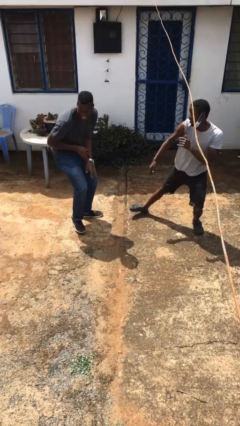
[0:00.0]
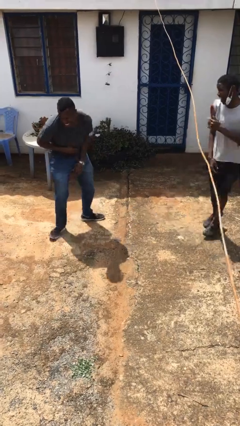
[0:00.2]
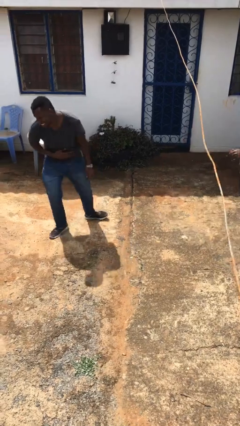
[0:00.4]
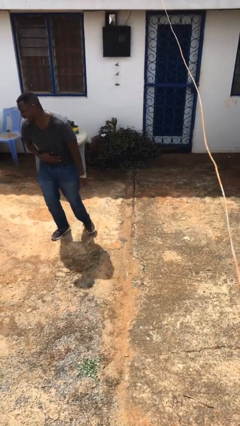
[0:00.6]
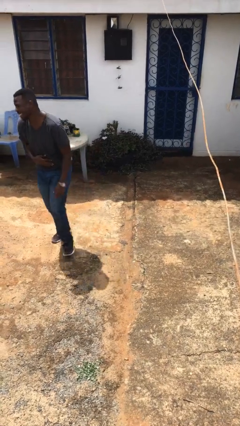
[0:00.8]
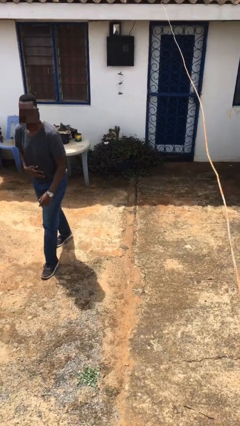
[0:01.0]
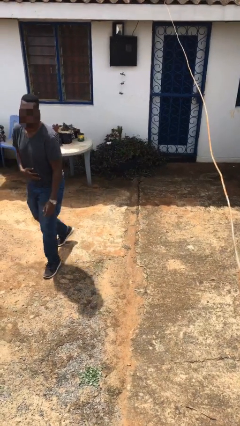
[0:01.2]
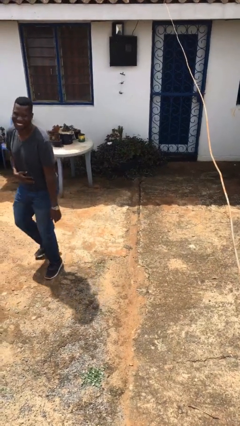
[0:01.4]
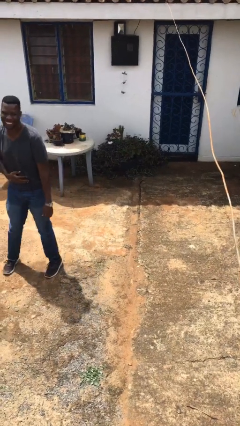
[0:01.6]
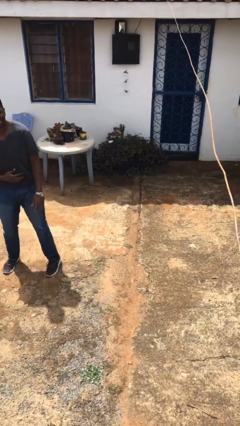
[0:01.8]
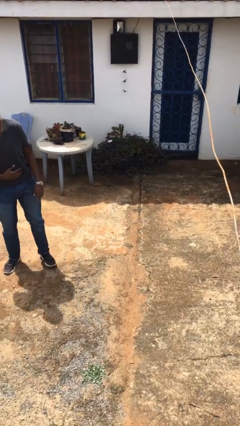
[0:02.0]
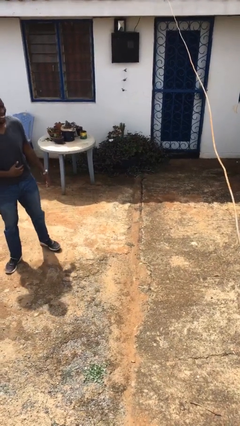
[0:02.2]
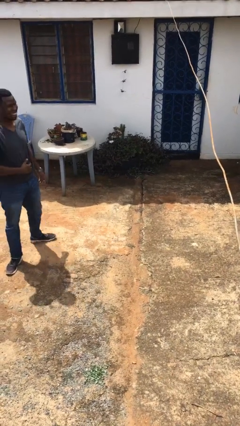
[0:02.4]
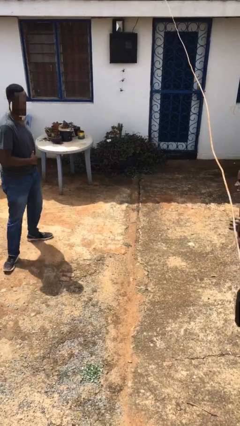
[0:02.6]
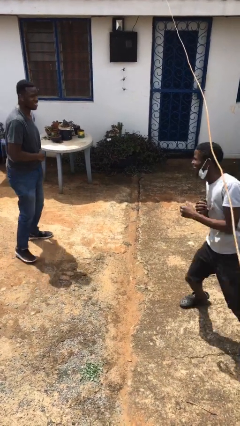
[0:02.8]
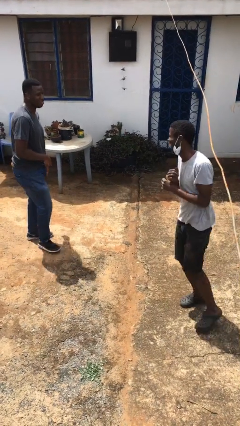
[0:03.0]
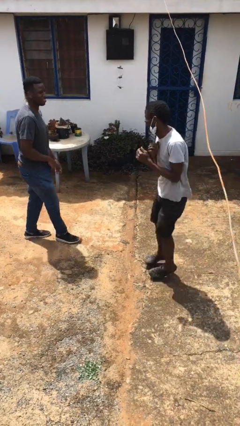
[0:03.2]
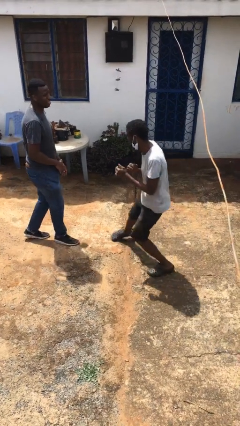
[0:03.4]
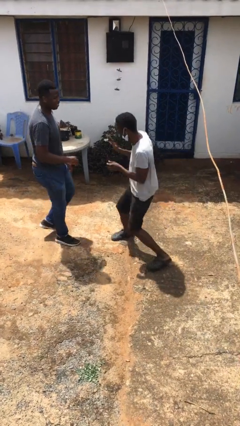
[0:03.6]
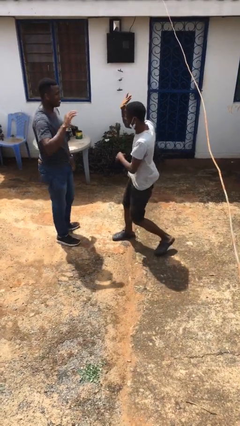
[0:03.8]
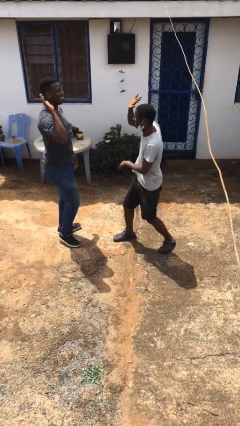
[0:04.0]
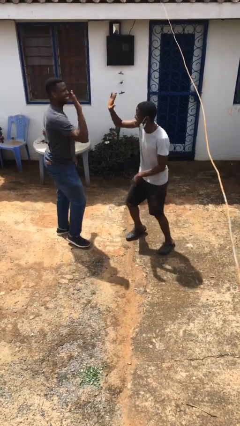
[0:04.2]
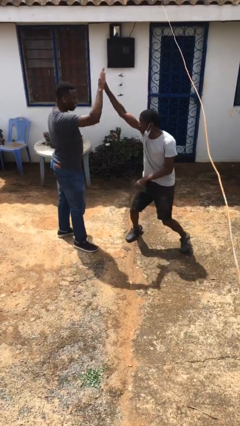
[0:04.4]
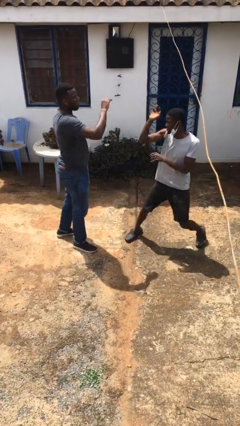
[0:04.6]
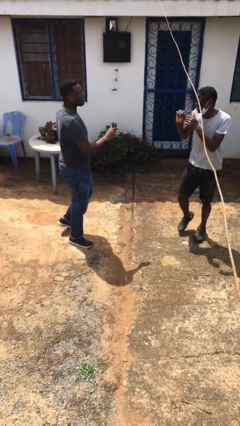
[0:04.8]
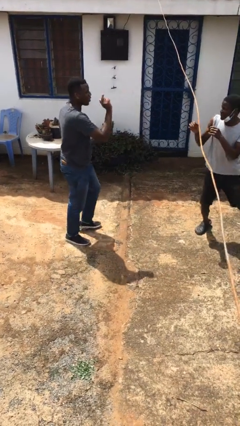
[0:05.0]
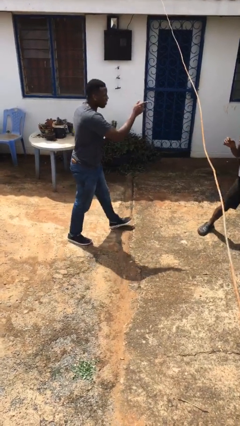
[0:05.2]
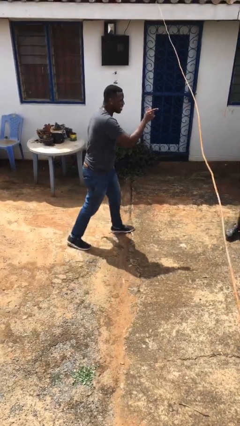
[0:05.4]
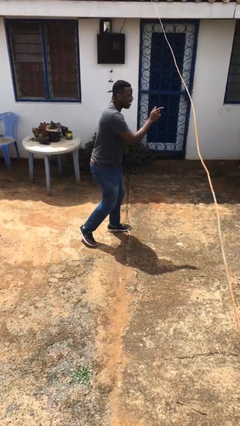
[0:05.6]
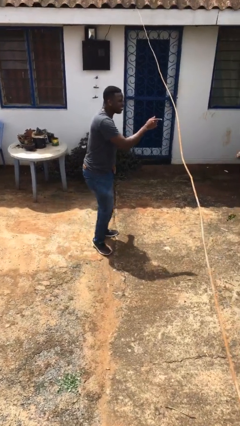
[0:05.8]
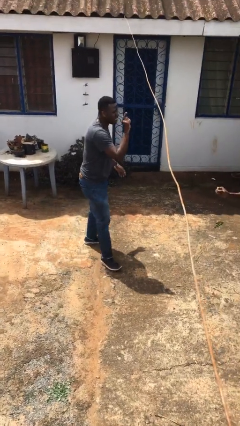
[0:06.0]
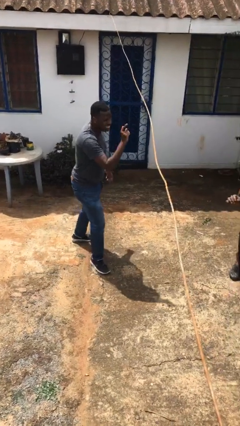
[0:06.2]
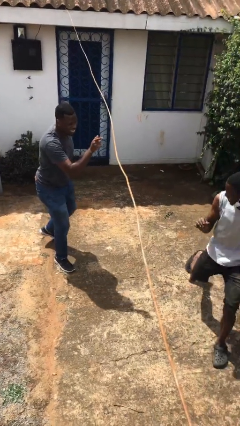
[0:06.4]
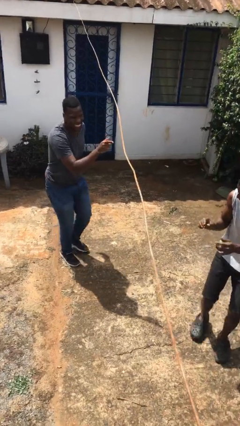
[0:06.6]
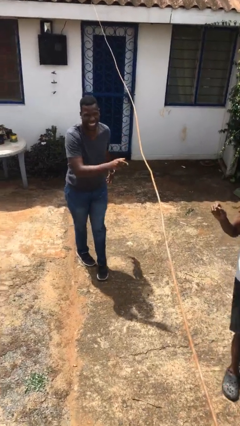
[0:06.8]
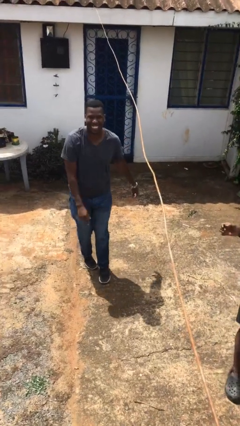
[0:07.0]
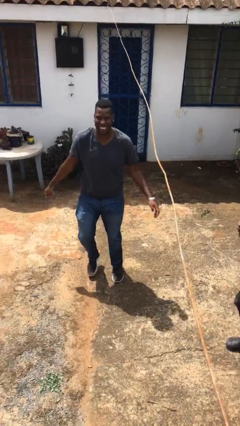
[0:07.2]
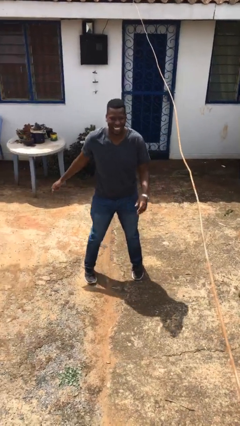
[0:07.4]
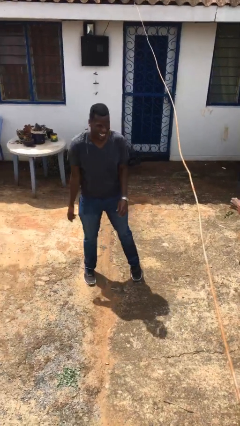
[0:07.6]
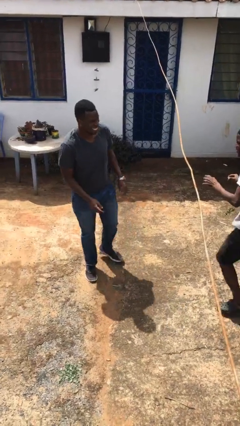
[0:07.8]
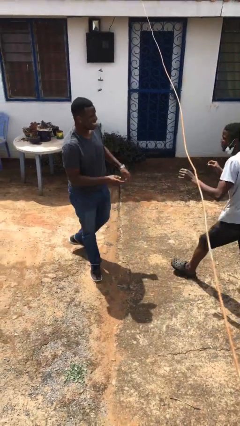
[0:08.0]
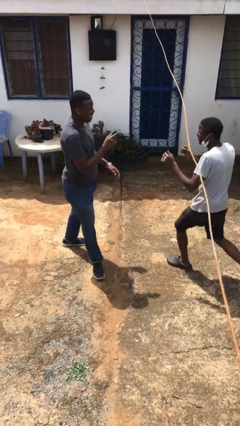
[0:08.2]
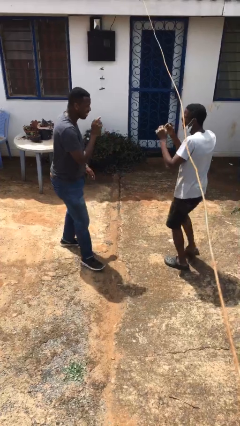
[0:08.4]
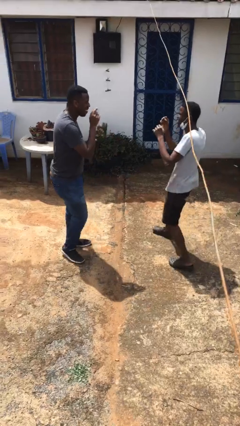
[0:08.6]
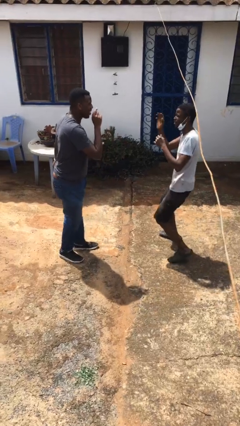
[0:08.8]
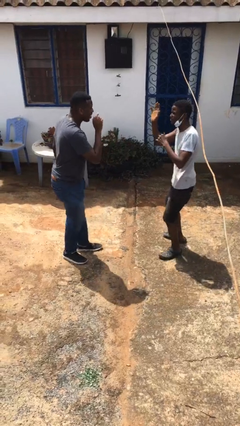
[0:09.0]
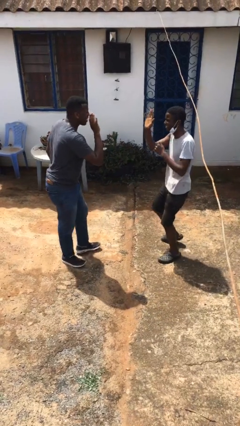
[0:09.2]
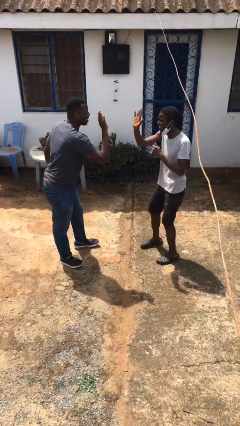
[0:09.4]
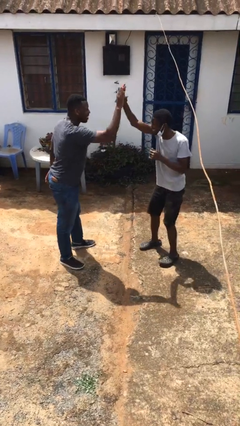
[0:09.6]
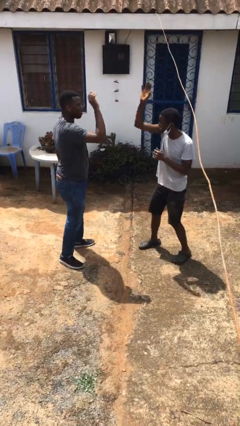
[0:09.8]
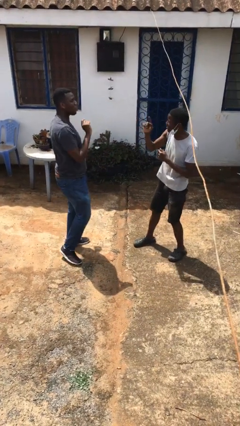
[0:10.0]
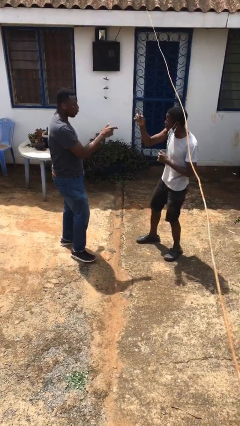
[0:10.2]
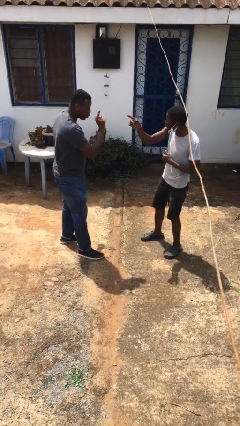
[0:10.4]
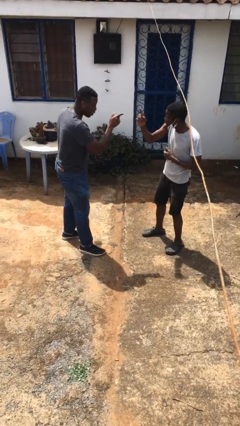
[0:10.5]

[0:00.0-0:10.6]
person highfives hand

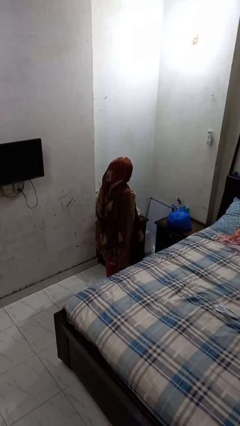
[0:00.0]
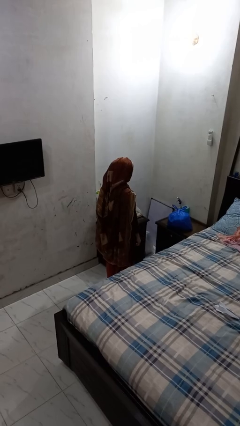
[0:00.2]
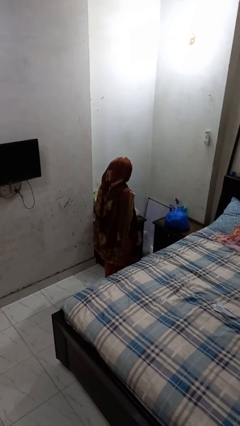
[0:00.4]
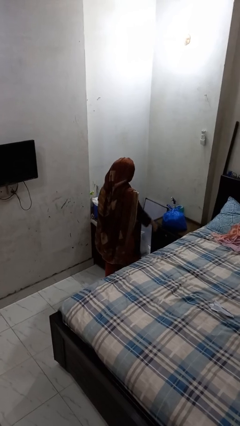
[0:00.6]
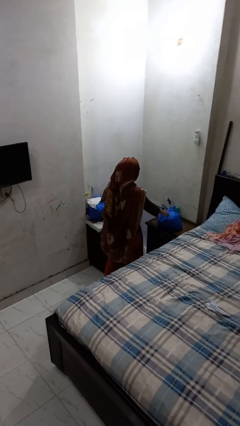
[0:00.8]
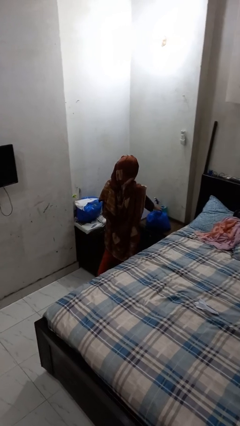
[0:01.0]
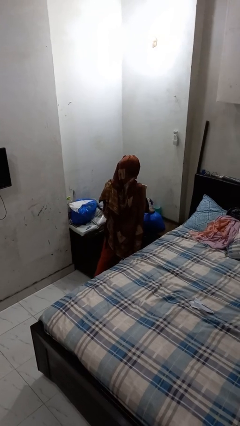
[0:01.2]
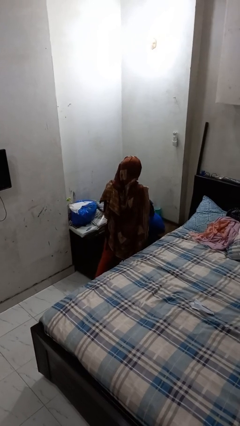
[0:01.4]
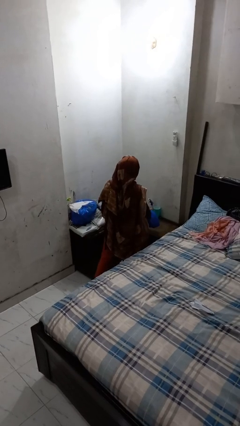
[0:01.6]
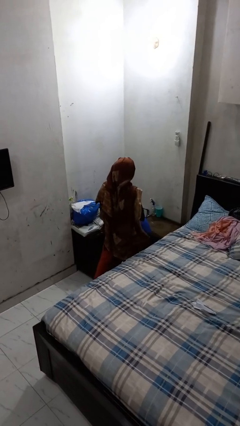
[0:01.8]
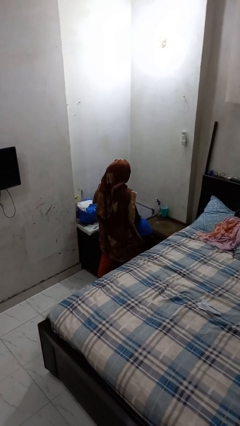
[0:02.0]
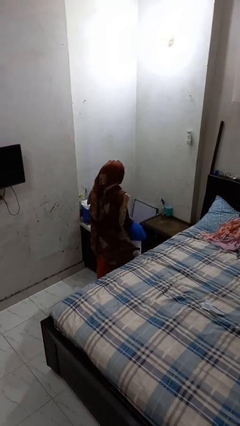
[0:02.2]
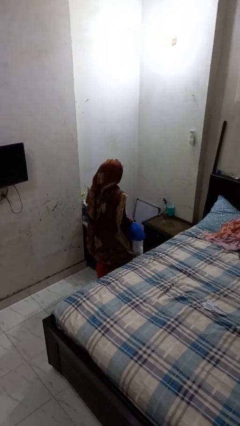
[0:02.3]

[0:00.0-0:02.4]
person picks up object from table

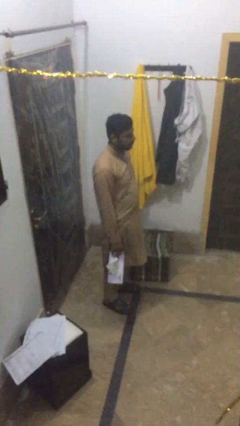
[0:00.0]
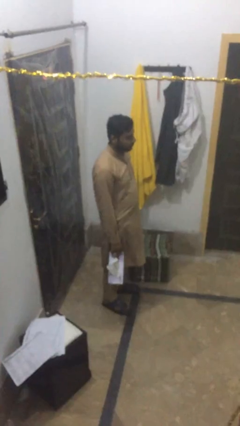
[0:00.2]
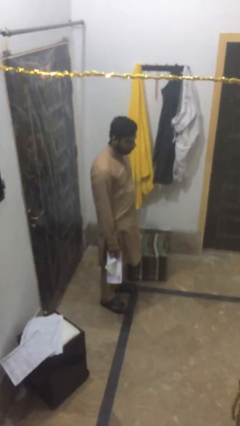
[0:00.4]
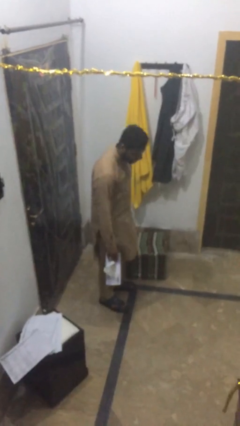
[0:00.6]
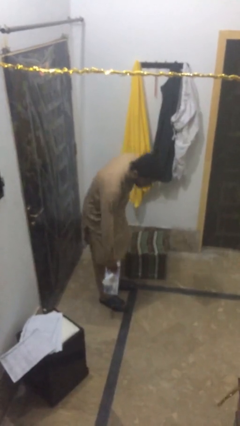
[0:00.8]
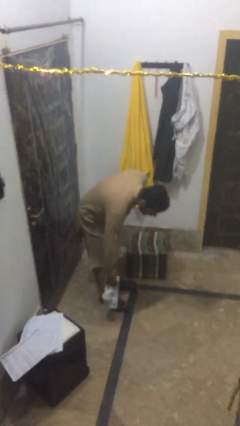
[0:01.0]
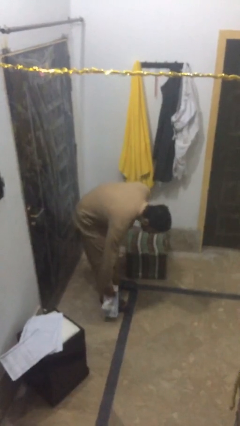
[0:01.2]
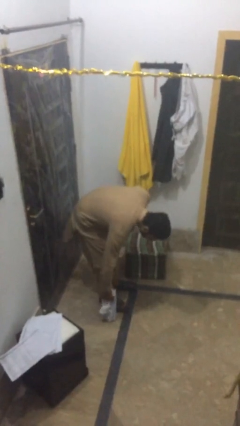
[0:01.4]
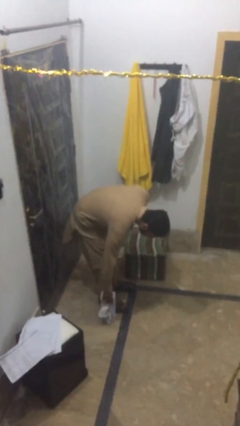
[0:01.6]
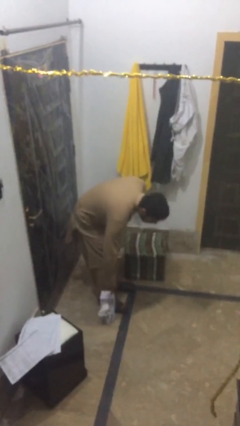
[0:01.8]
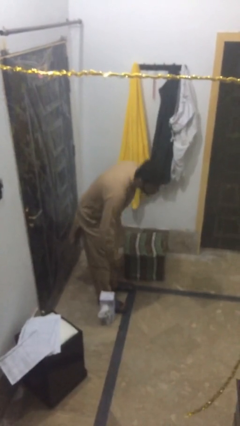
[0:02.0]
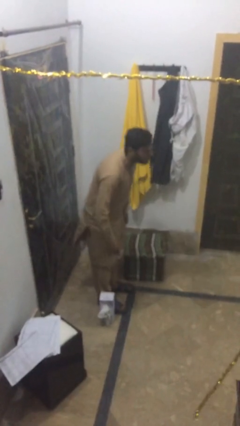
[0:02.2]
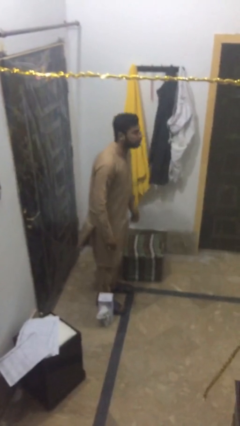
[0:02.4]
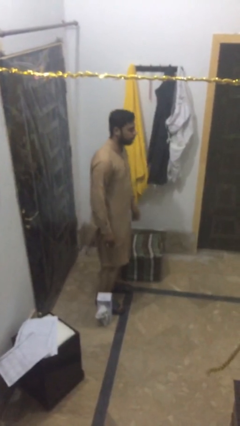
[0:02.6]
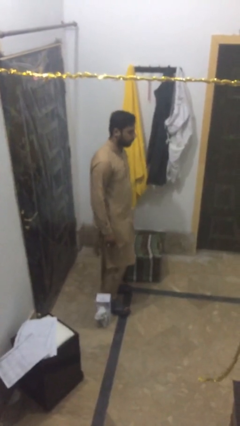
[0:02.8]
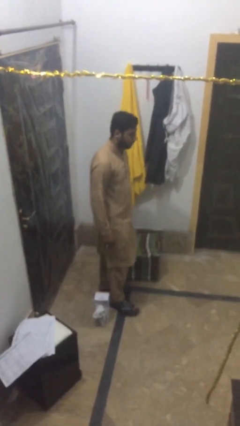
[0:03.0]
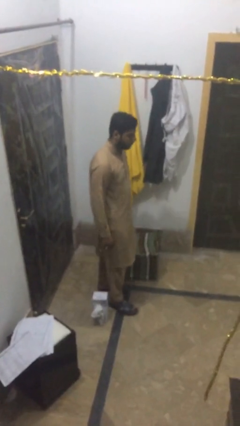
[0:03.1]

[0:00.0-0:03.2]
person puts down object on floor

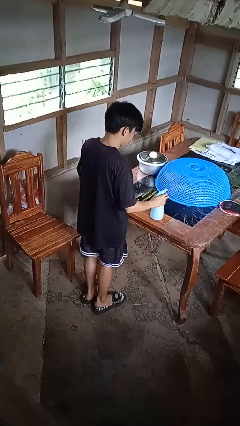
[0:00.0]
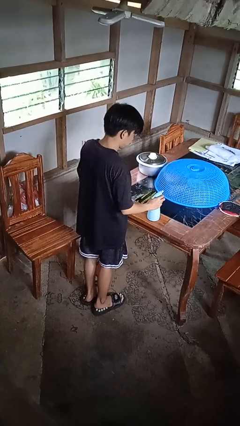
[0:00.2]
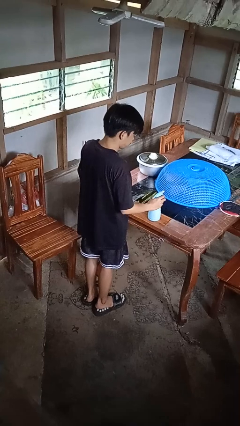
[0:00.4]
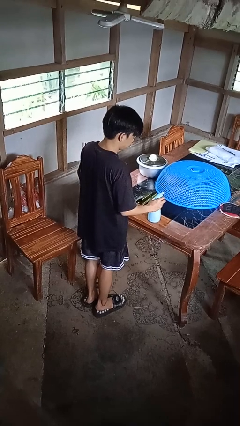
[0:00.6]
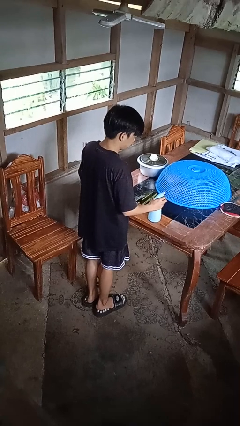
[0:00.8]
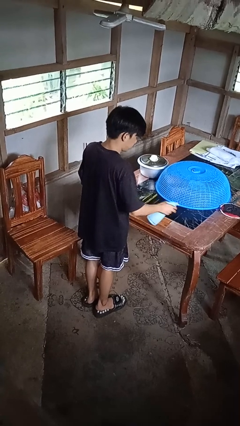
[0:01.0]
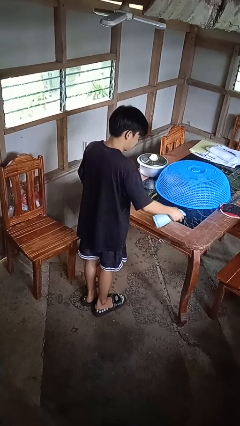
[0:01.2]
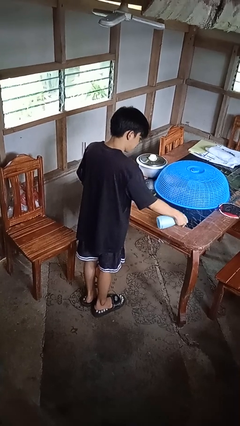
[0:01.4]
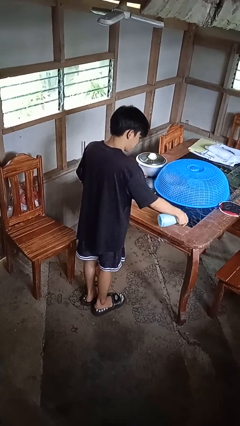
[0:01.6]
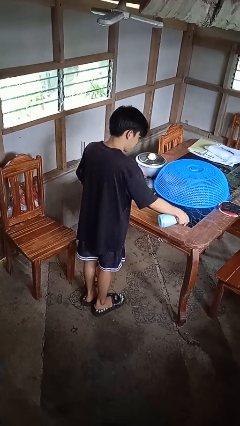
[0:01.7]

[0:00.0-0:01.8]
person sprays from bottle

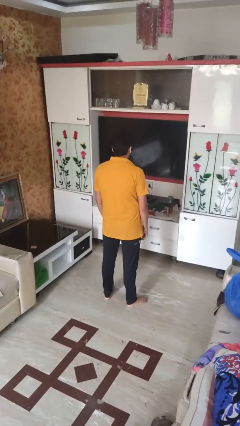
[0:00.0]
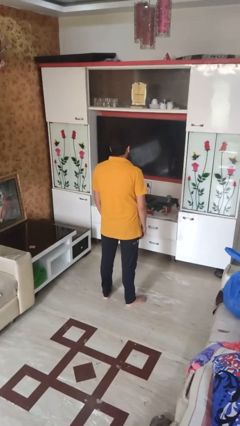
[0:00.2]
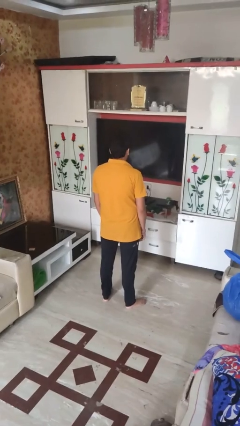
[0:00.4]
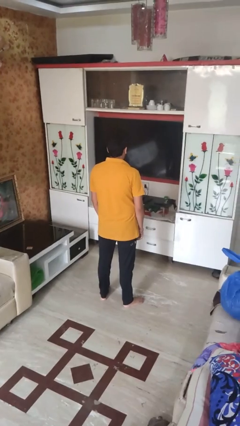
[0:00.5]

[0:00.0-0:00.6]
person nods head
